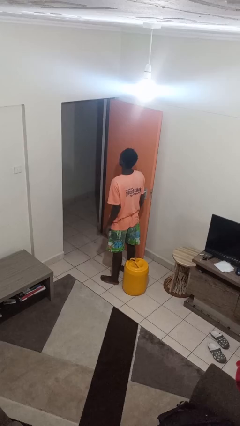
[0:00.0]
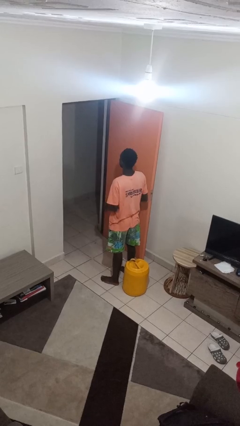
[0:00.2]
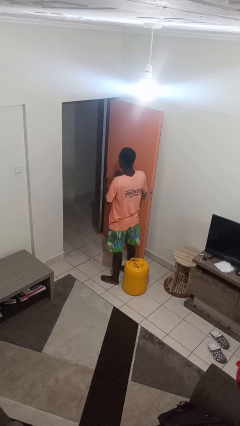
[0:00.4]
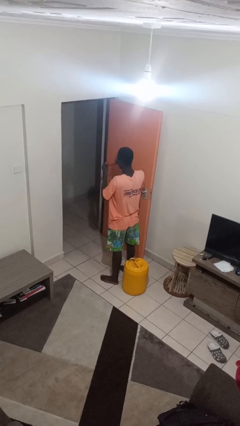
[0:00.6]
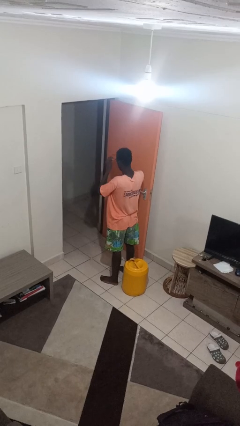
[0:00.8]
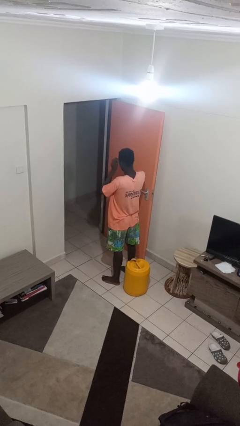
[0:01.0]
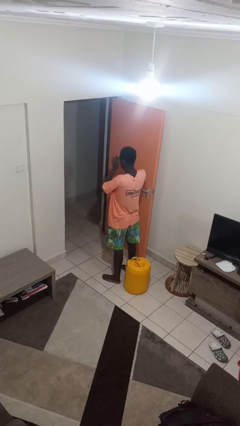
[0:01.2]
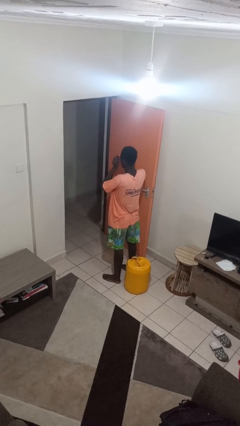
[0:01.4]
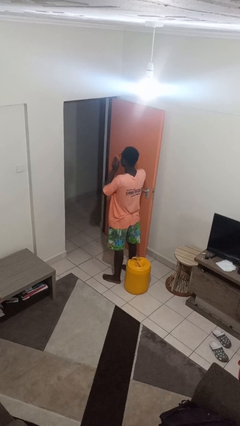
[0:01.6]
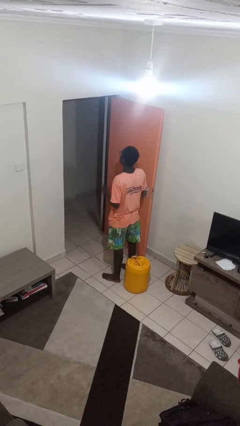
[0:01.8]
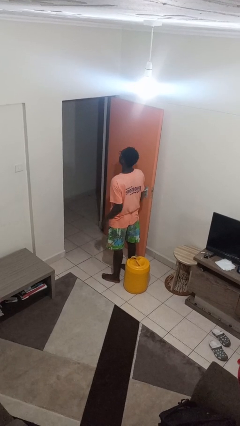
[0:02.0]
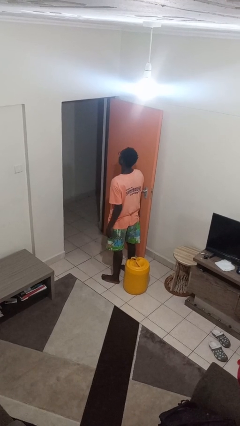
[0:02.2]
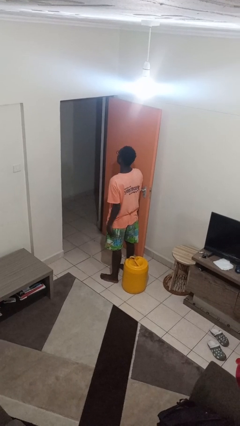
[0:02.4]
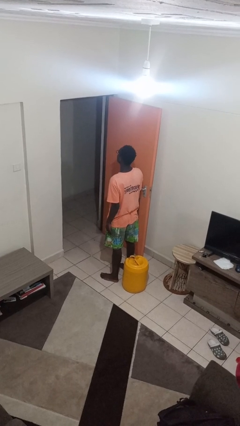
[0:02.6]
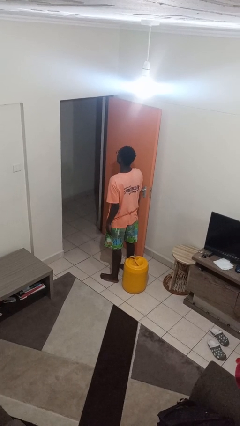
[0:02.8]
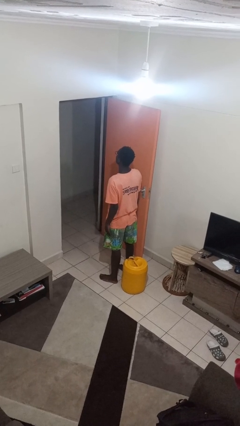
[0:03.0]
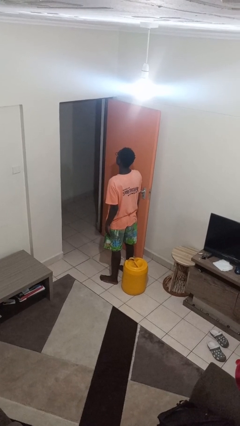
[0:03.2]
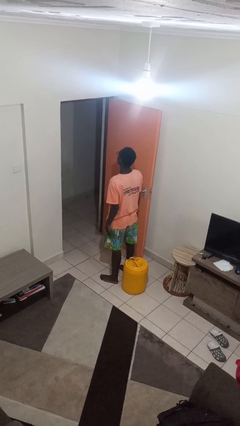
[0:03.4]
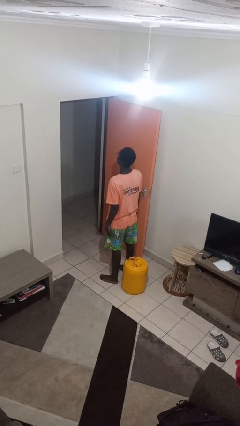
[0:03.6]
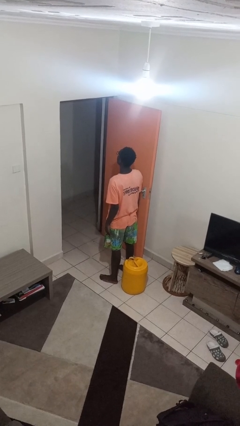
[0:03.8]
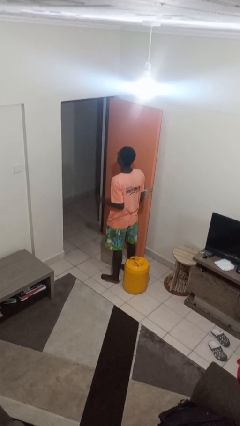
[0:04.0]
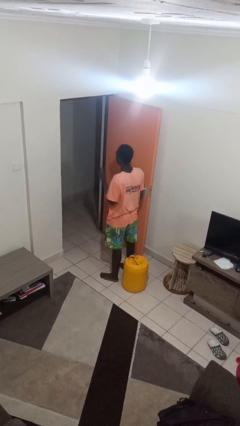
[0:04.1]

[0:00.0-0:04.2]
person puts on glasses

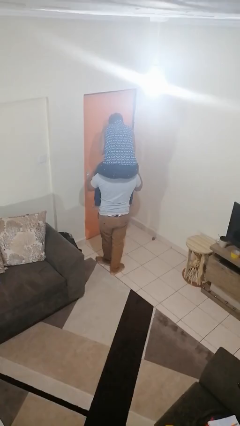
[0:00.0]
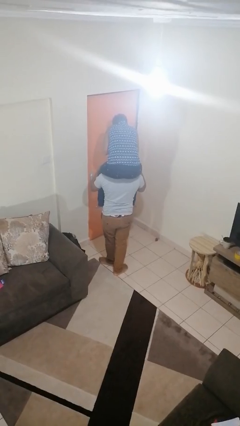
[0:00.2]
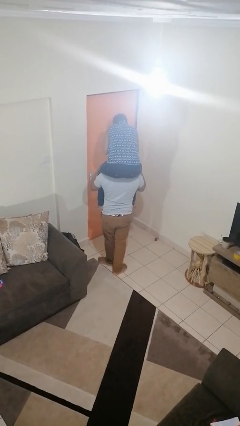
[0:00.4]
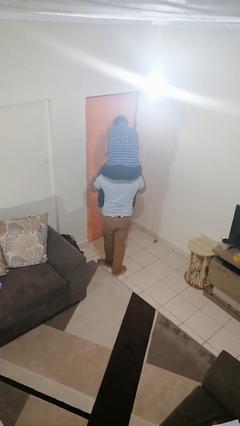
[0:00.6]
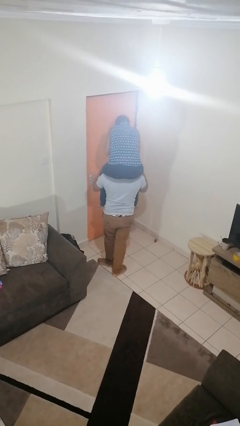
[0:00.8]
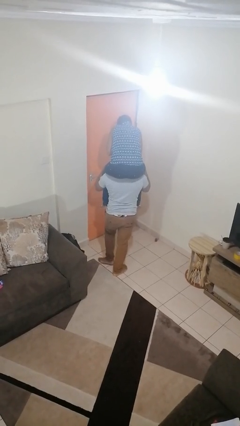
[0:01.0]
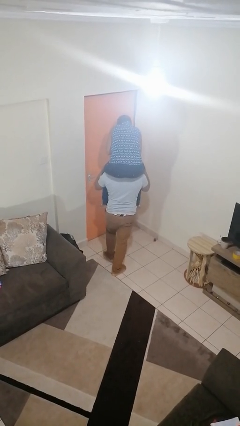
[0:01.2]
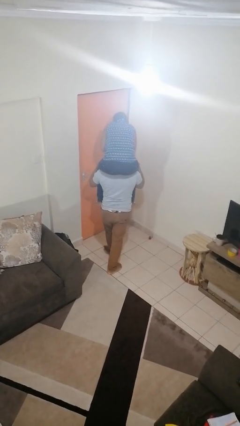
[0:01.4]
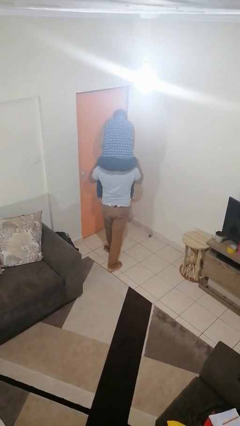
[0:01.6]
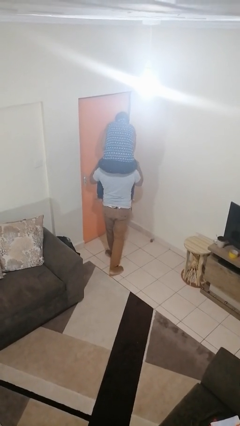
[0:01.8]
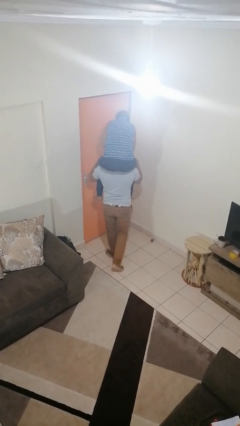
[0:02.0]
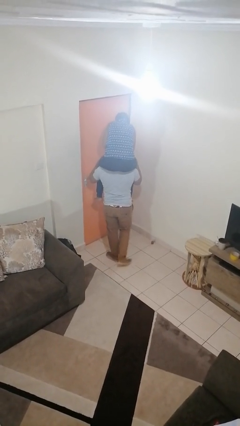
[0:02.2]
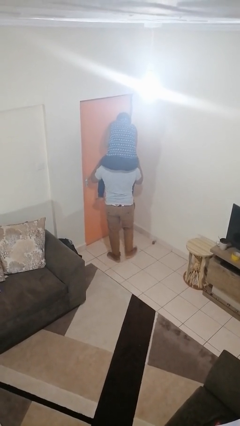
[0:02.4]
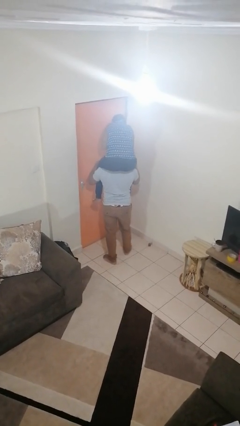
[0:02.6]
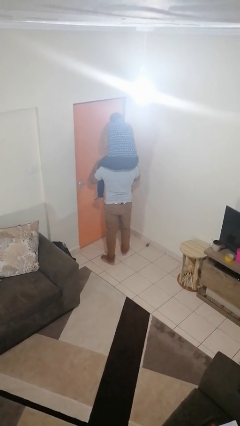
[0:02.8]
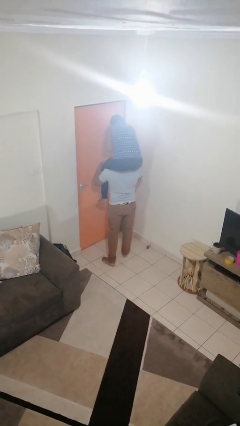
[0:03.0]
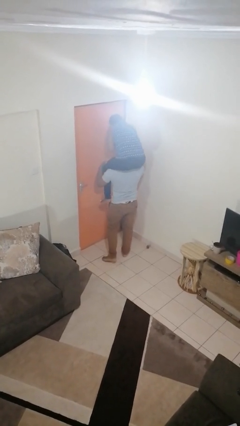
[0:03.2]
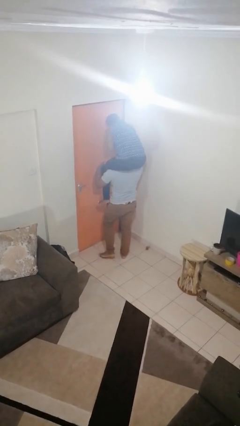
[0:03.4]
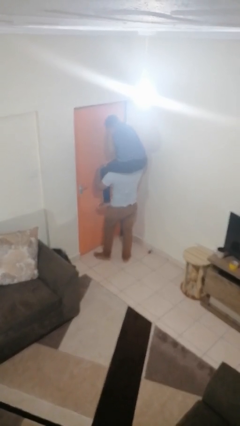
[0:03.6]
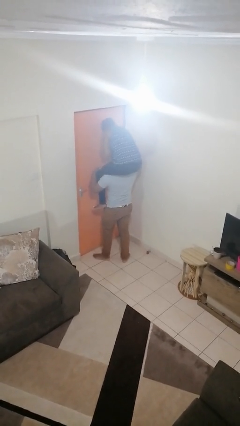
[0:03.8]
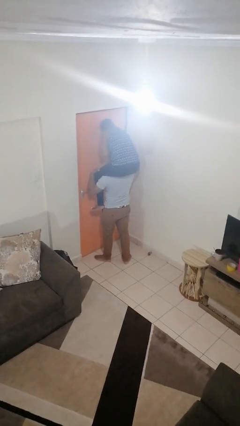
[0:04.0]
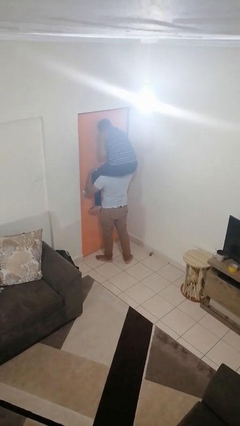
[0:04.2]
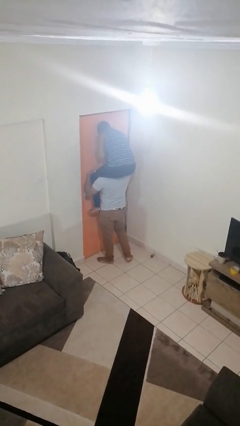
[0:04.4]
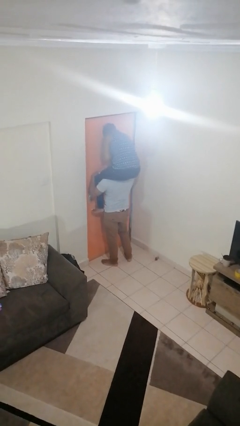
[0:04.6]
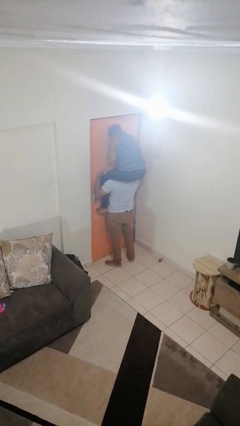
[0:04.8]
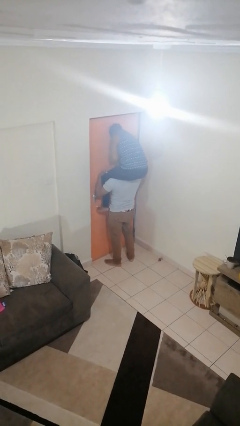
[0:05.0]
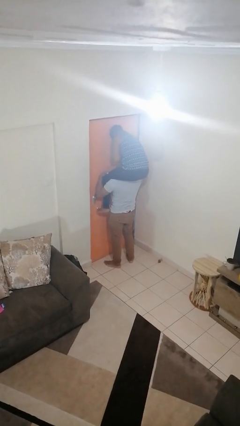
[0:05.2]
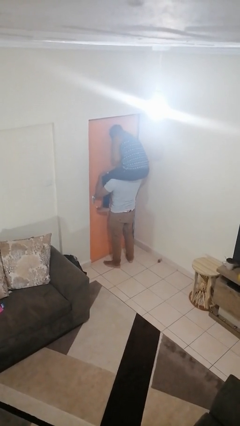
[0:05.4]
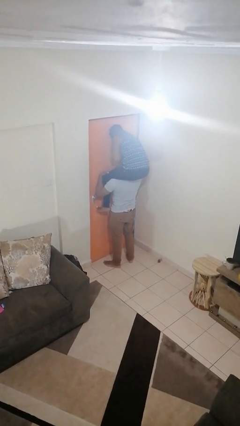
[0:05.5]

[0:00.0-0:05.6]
person carries person on shoulders

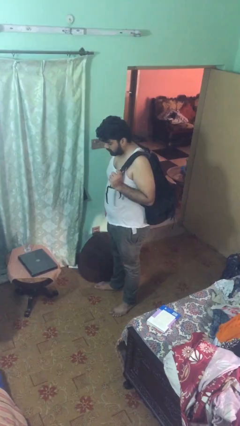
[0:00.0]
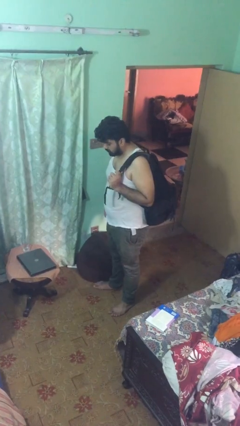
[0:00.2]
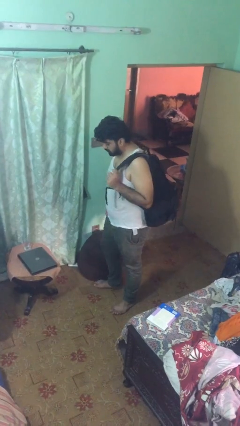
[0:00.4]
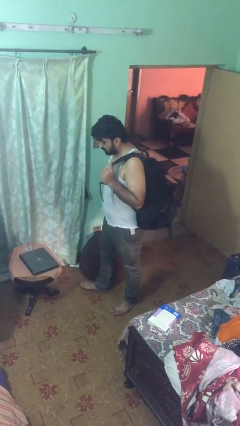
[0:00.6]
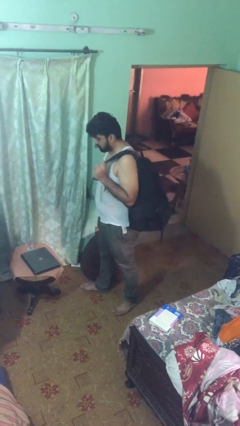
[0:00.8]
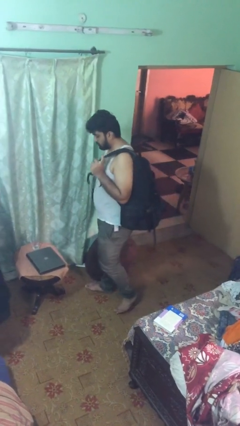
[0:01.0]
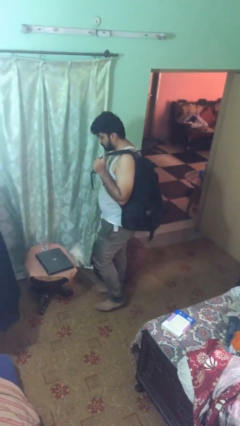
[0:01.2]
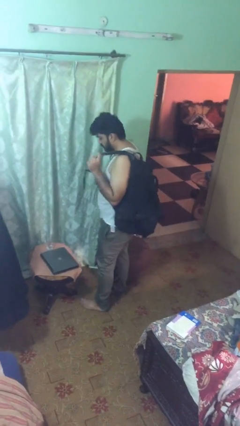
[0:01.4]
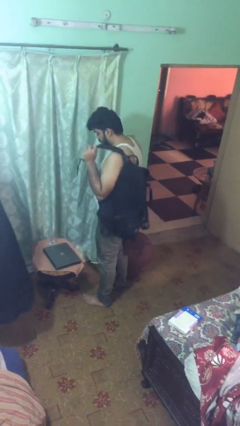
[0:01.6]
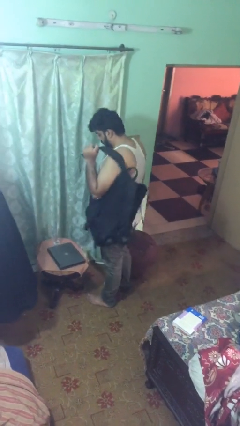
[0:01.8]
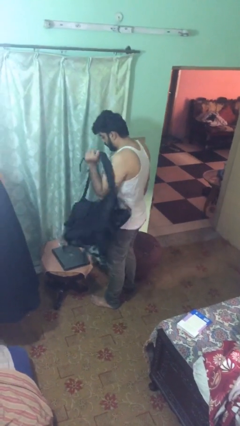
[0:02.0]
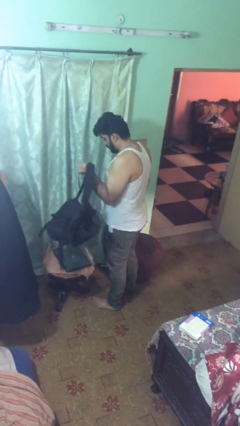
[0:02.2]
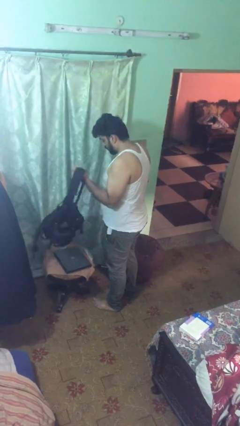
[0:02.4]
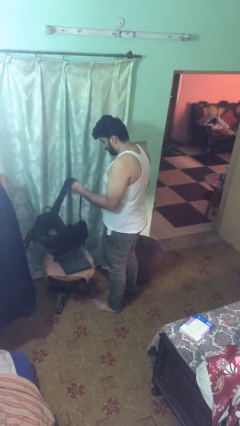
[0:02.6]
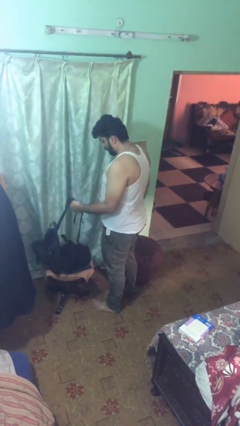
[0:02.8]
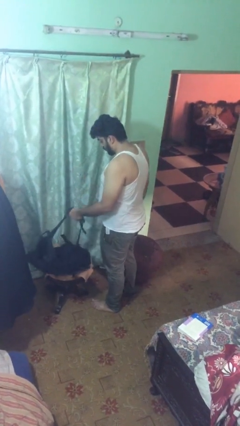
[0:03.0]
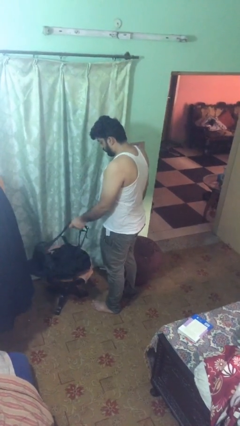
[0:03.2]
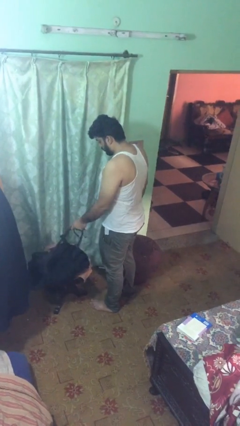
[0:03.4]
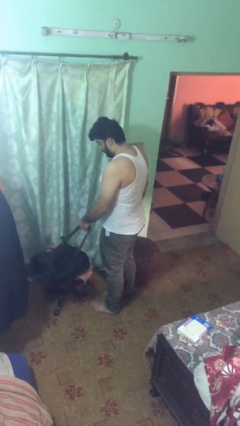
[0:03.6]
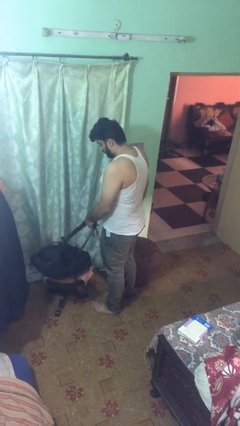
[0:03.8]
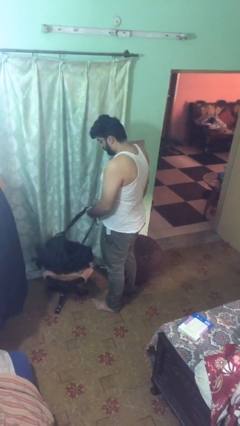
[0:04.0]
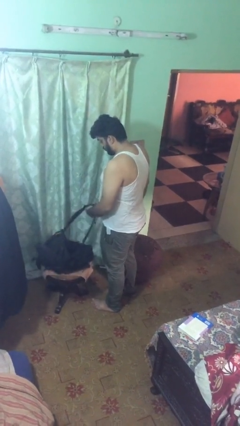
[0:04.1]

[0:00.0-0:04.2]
person puts down object on table

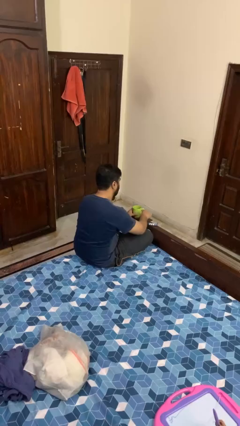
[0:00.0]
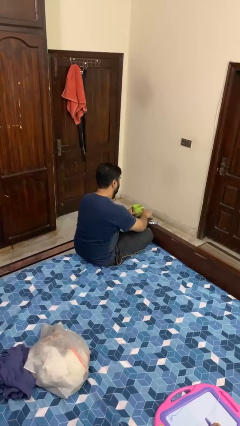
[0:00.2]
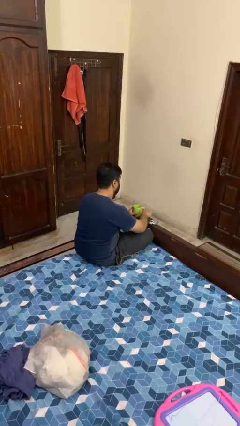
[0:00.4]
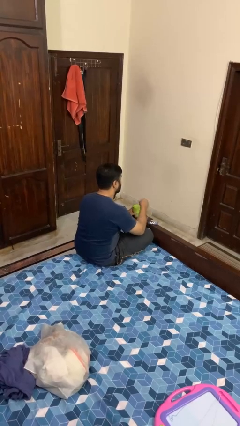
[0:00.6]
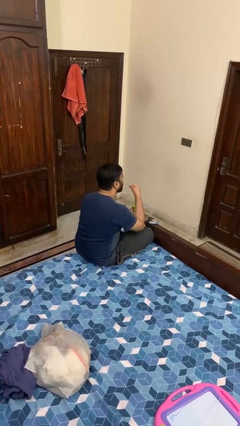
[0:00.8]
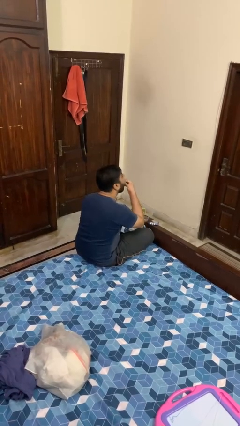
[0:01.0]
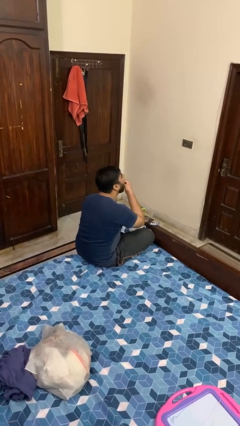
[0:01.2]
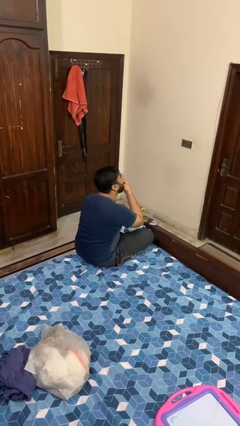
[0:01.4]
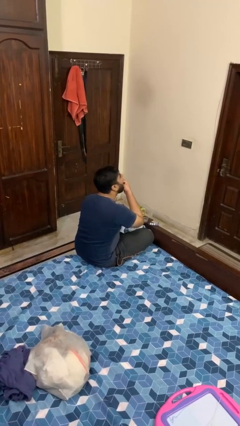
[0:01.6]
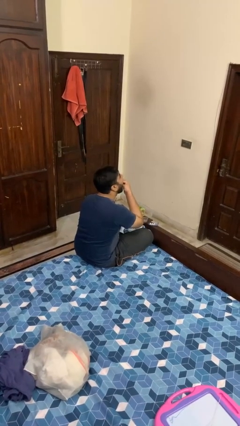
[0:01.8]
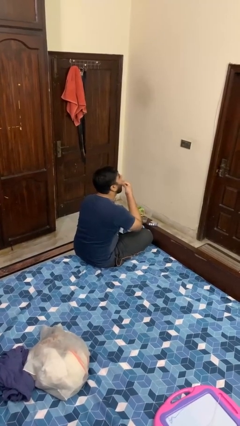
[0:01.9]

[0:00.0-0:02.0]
person takes medicine pills

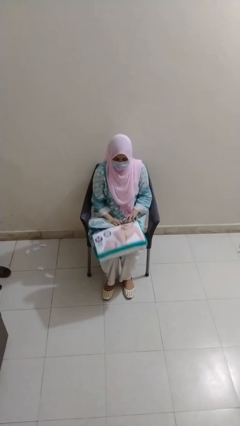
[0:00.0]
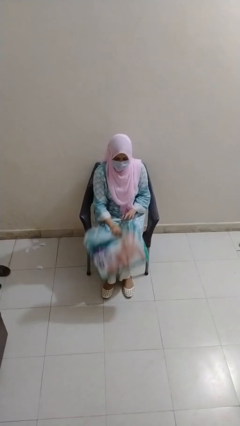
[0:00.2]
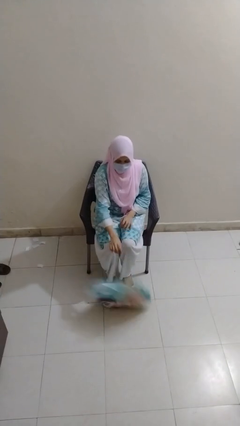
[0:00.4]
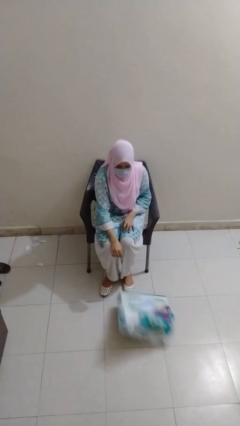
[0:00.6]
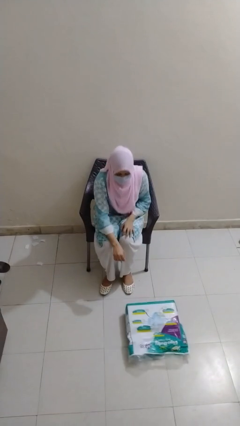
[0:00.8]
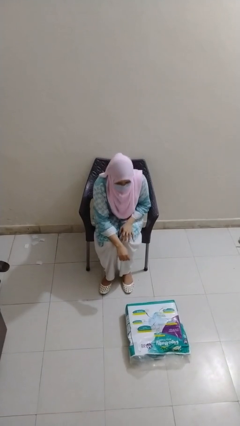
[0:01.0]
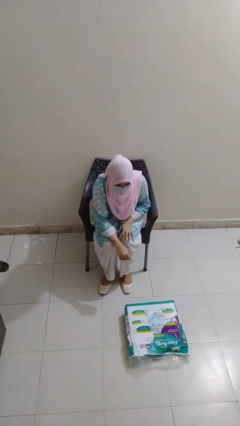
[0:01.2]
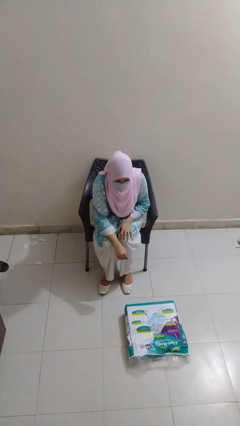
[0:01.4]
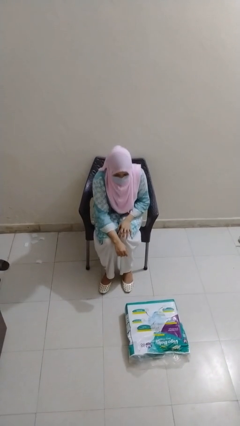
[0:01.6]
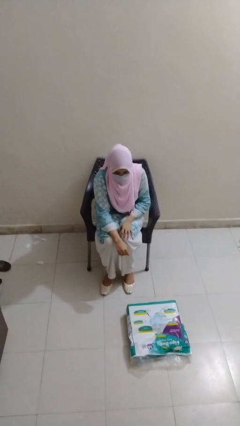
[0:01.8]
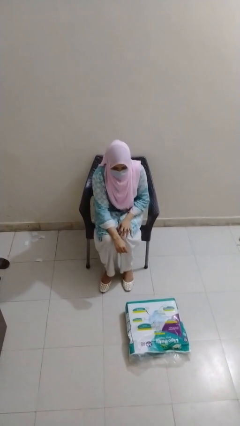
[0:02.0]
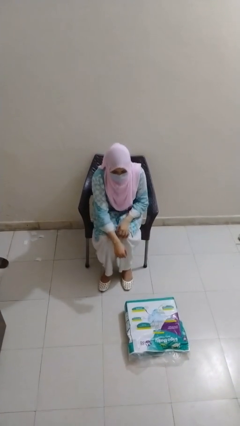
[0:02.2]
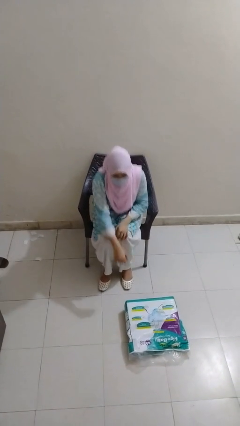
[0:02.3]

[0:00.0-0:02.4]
person drops object
